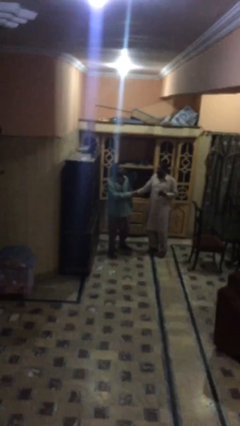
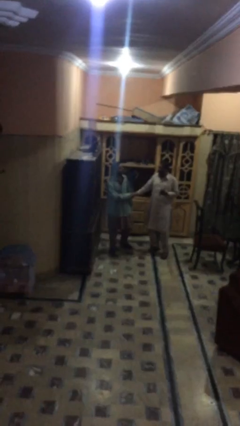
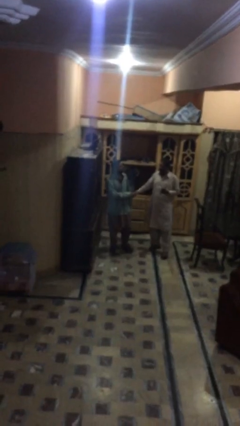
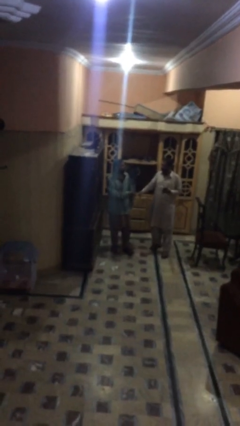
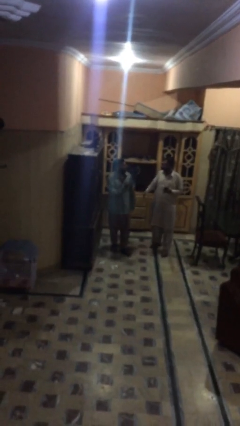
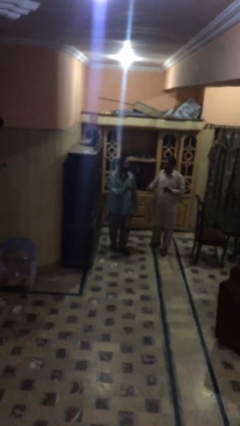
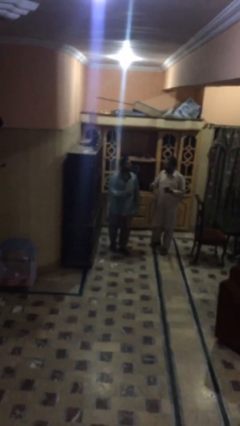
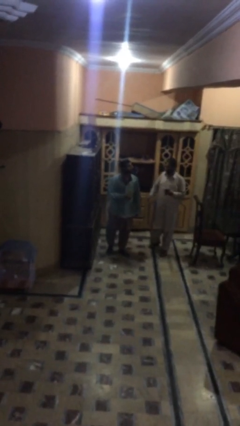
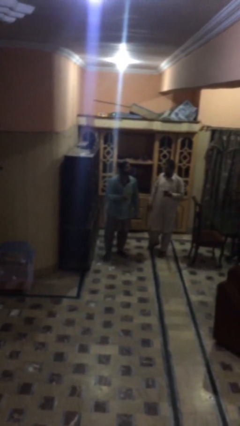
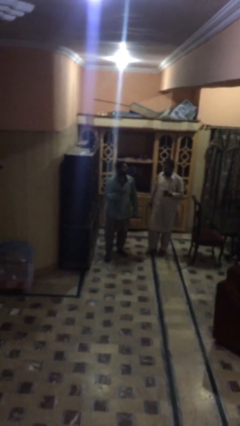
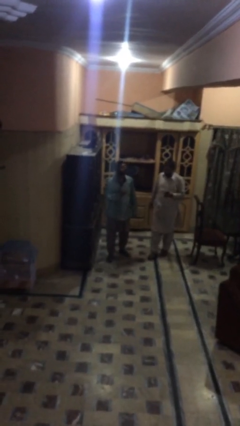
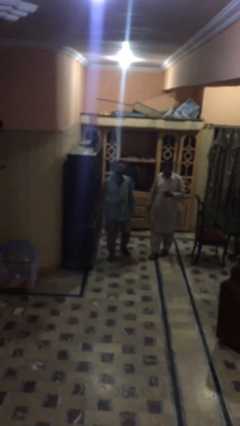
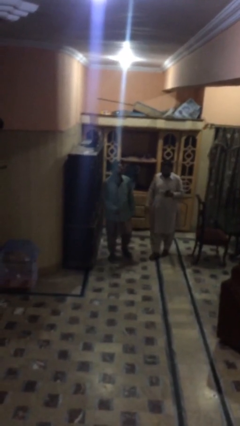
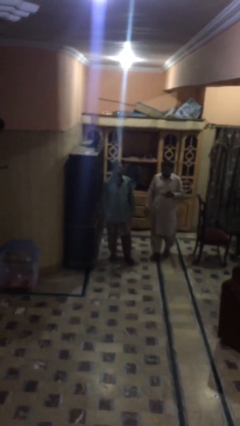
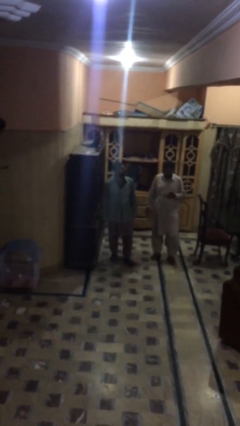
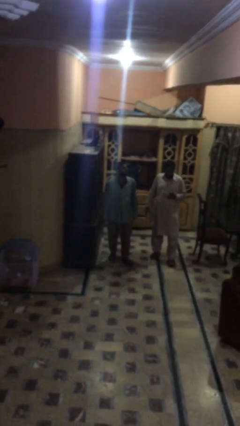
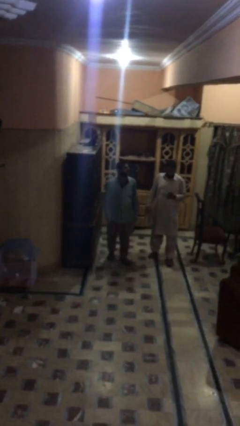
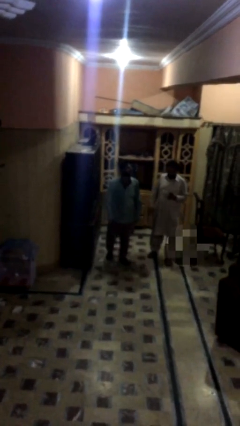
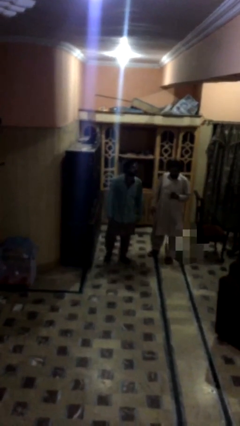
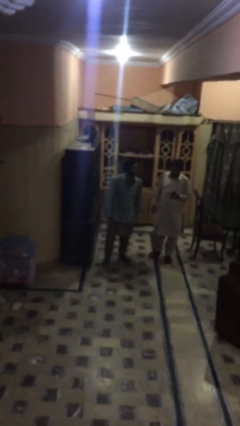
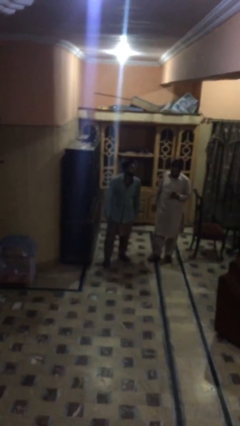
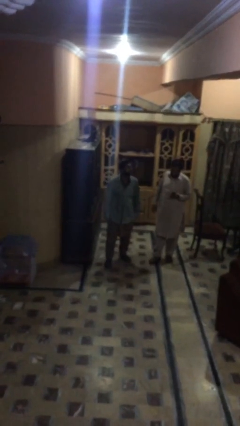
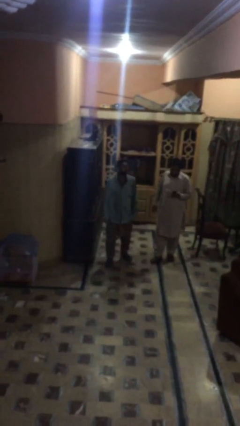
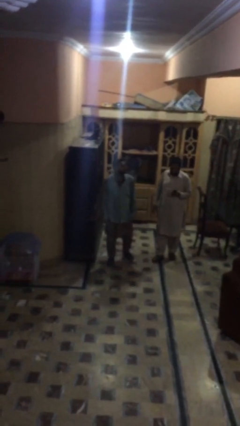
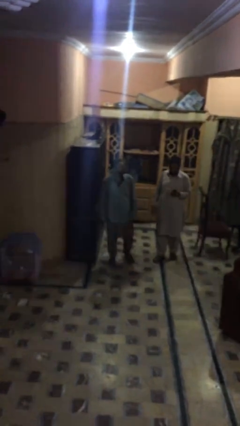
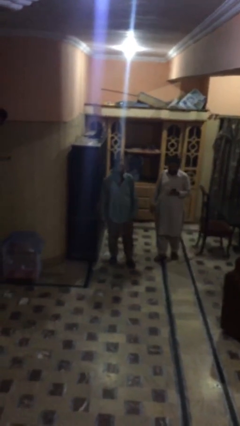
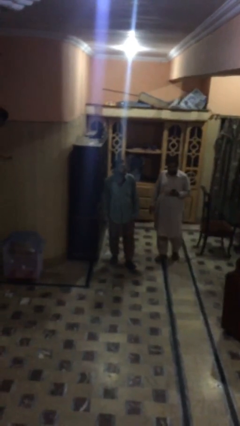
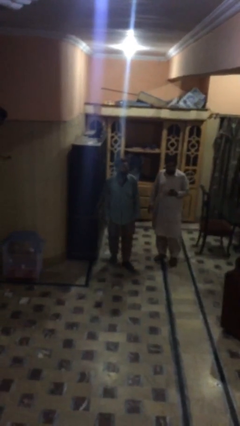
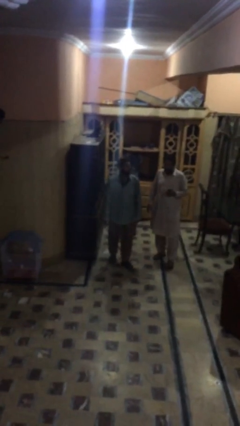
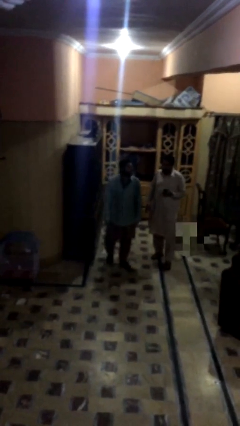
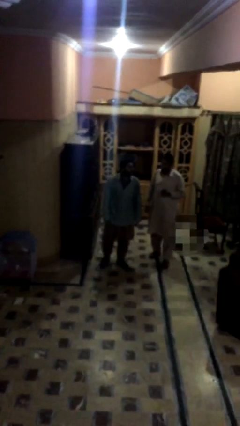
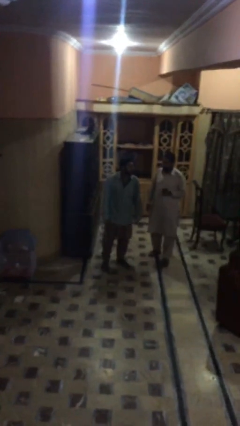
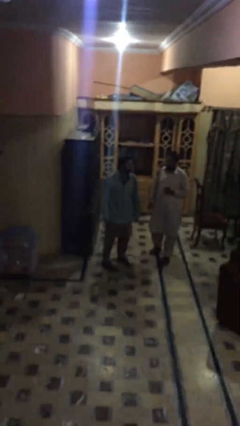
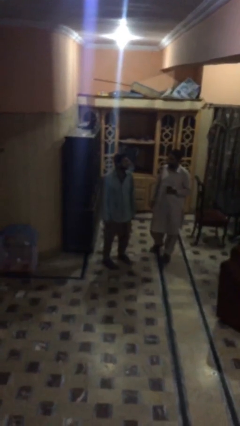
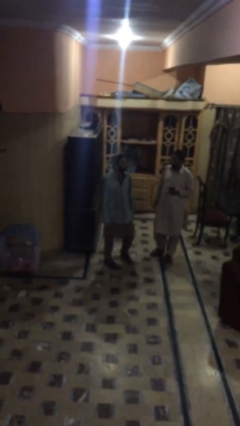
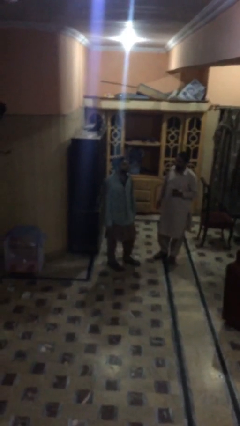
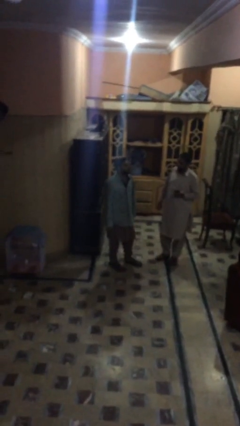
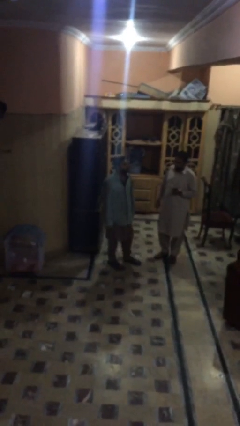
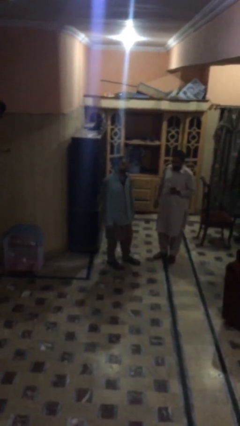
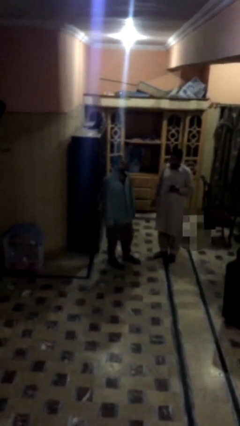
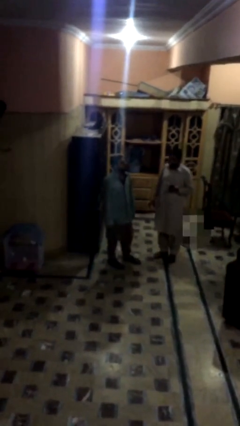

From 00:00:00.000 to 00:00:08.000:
person talks to person

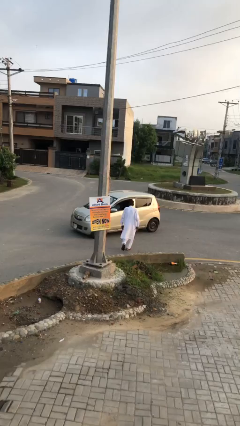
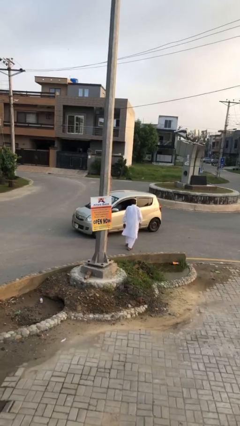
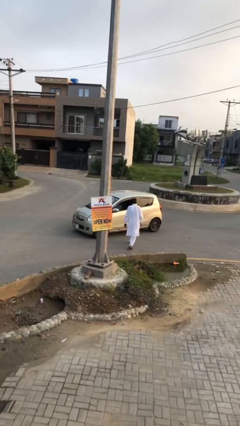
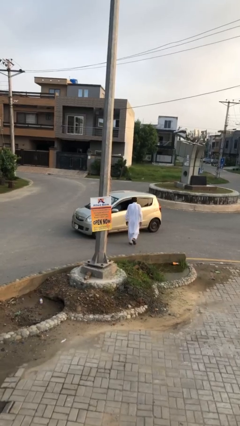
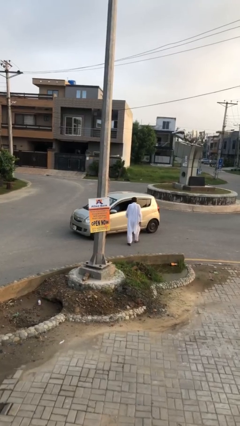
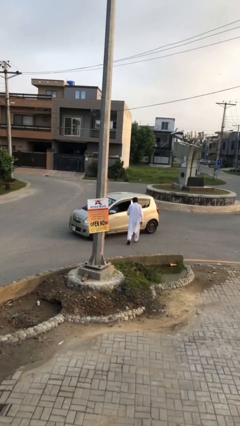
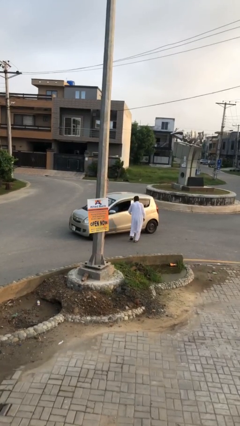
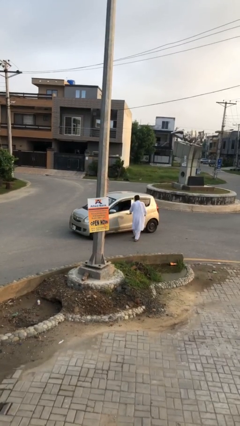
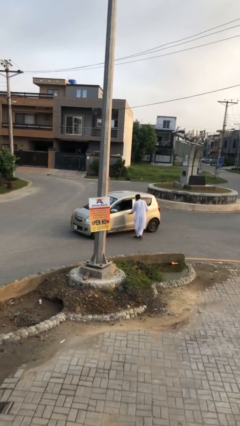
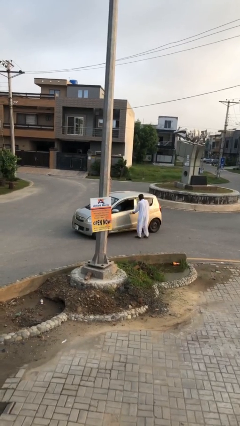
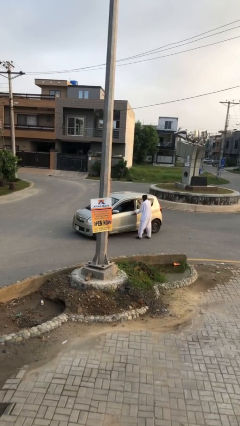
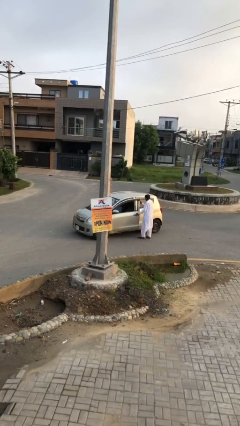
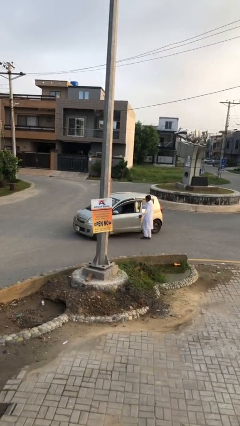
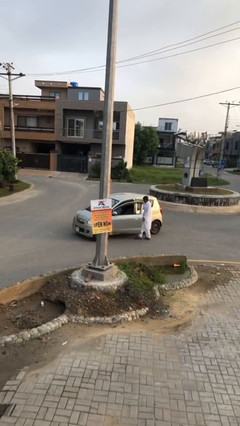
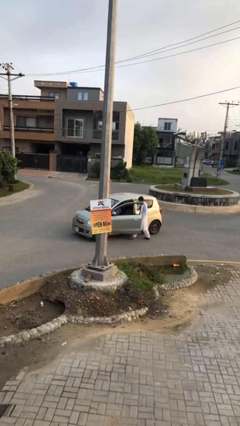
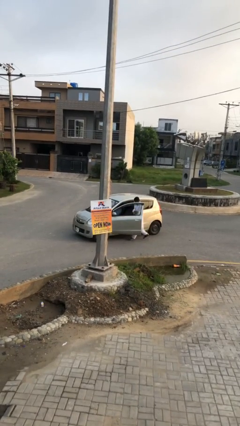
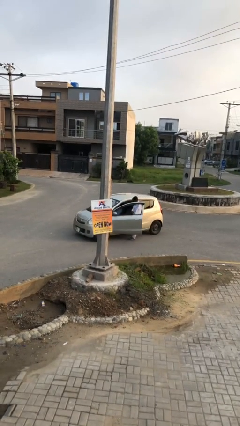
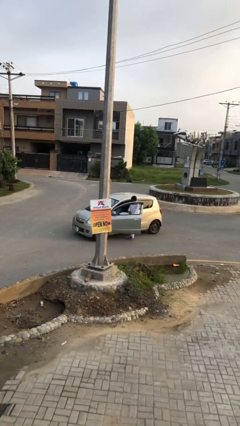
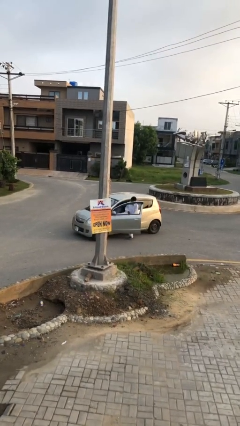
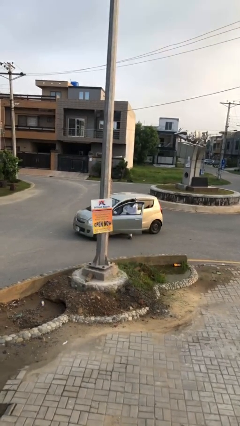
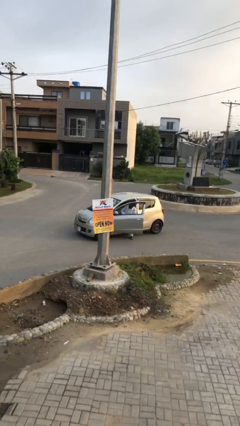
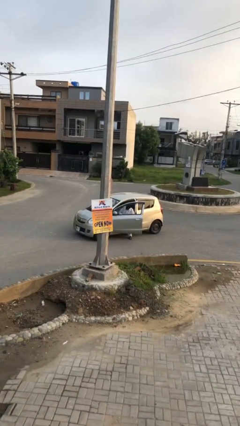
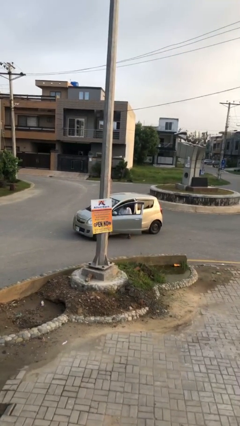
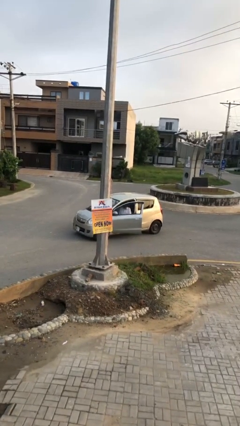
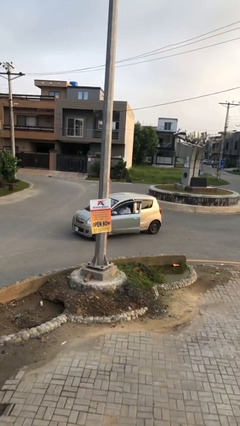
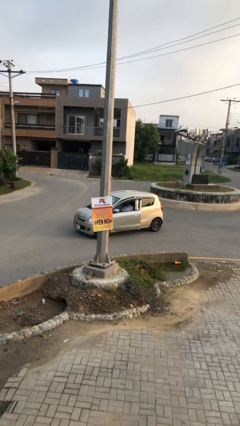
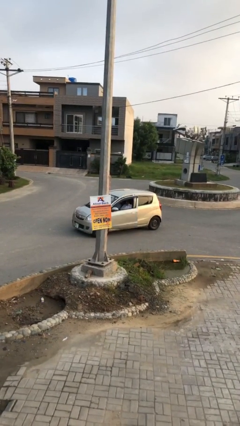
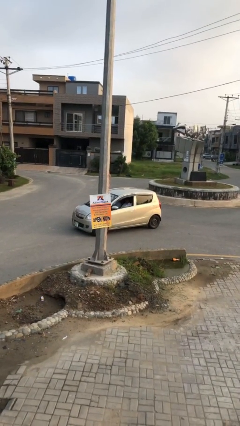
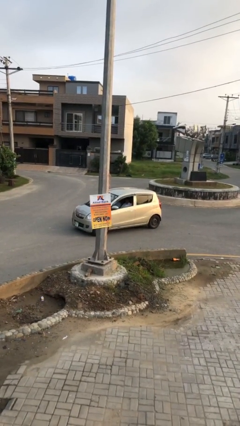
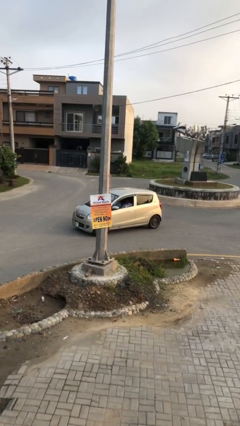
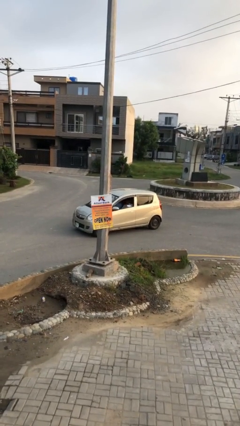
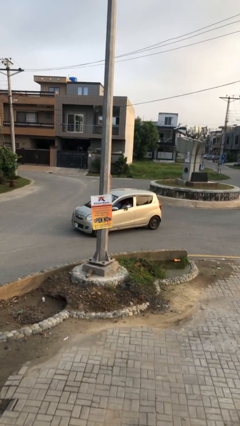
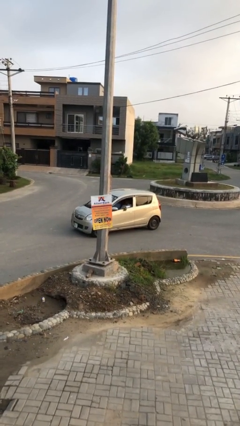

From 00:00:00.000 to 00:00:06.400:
car picks up person

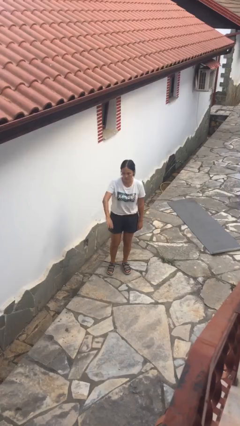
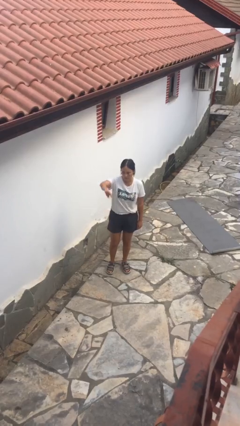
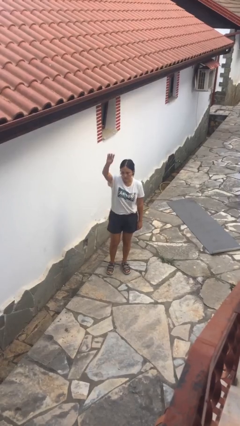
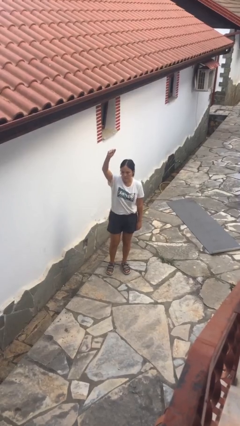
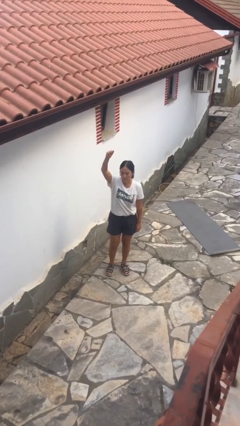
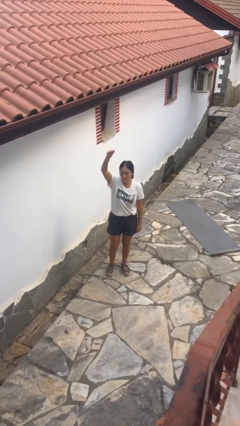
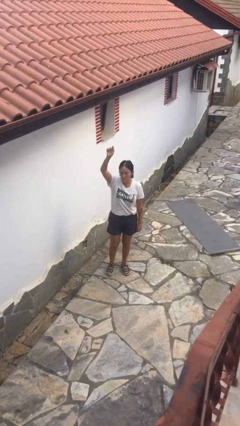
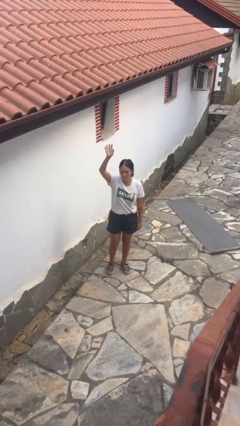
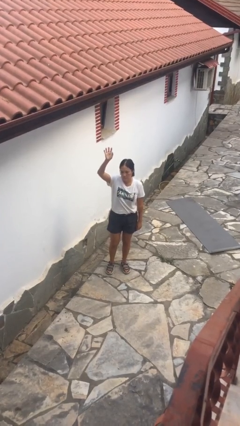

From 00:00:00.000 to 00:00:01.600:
person gestures swipe up

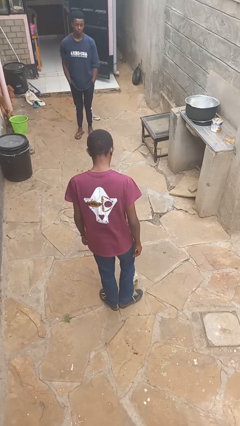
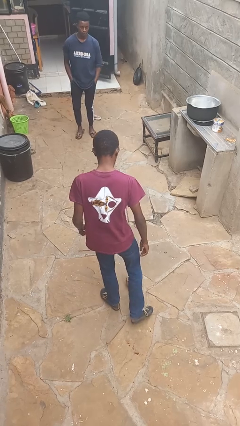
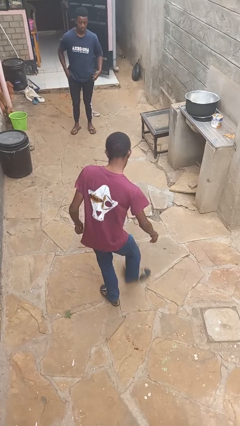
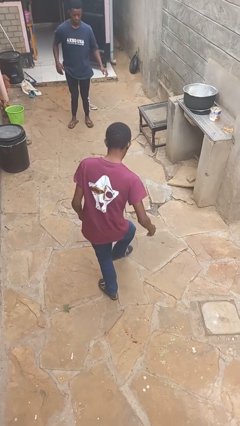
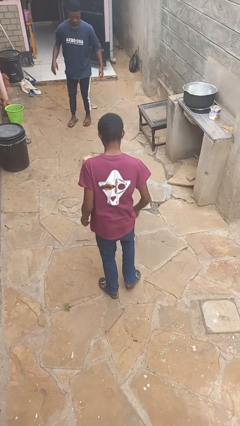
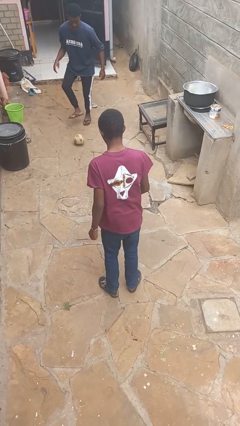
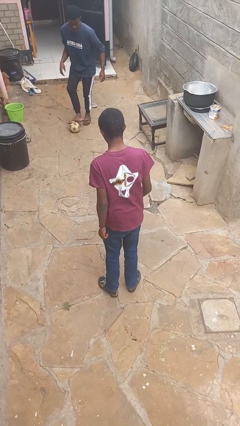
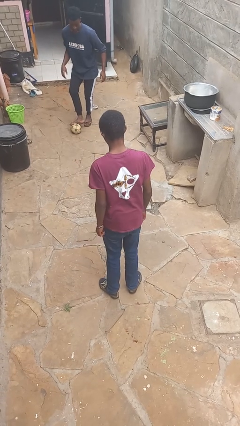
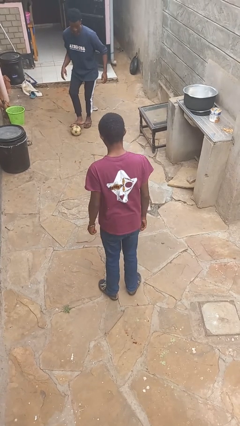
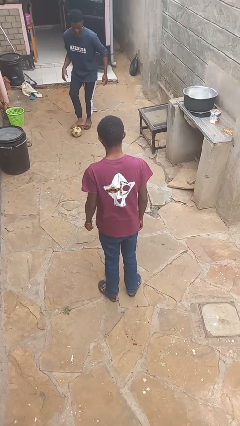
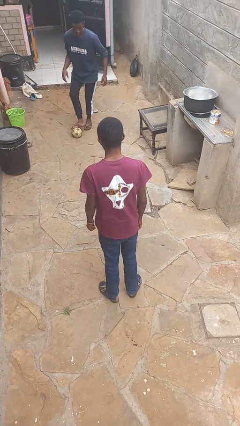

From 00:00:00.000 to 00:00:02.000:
person kicks object to person
